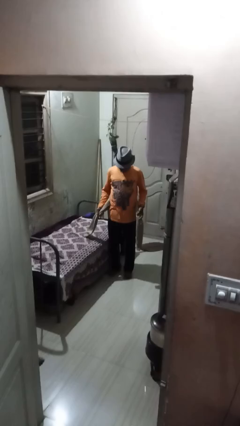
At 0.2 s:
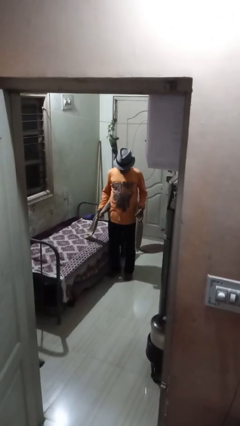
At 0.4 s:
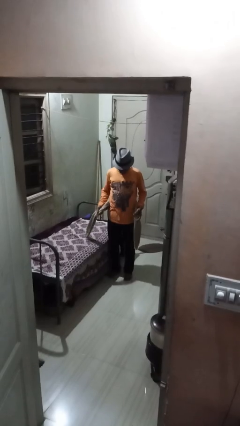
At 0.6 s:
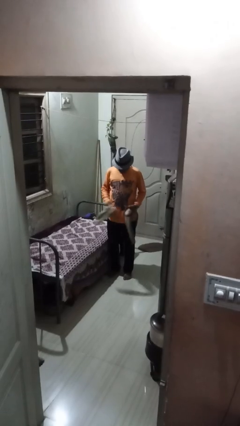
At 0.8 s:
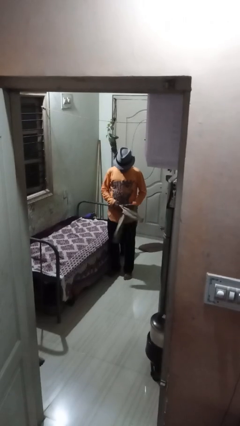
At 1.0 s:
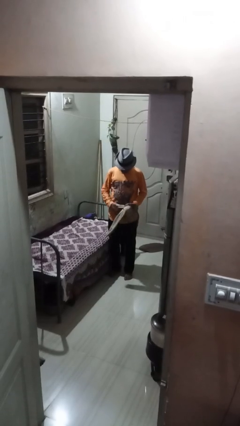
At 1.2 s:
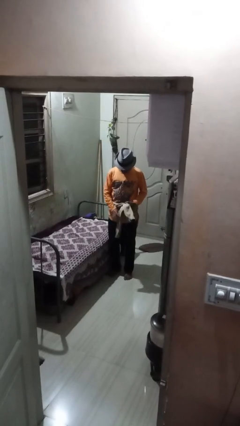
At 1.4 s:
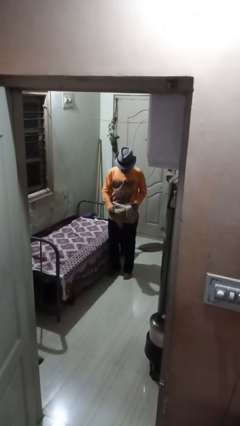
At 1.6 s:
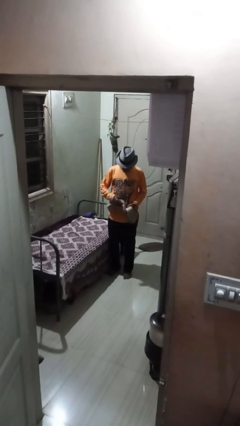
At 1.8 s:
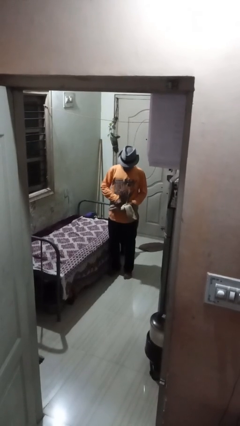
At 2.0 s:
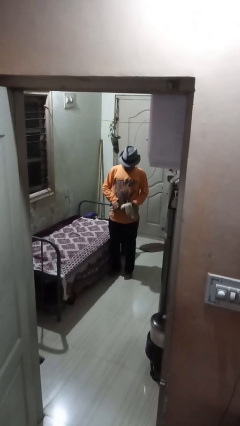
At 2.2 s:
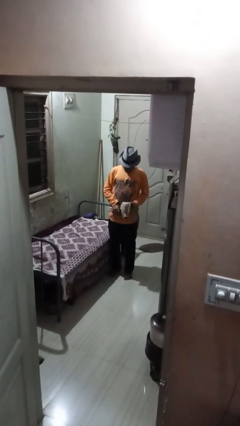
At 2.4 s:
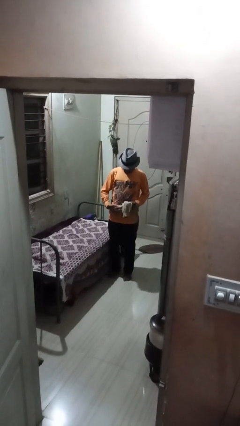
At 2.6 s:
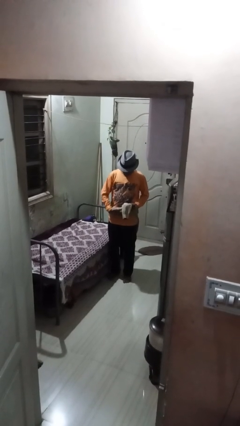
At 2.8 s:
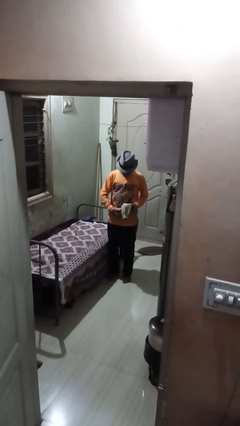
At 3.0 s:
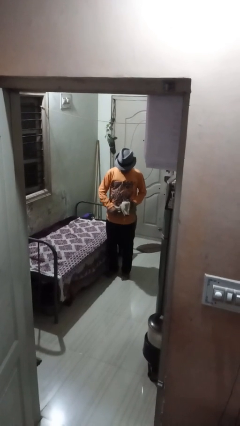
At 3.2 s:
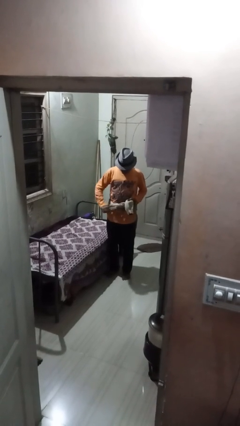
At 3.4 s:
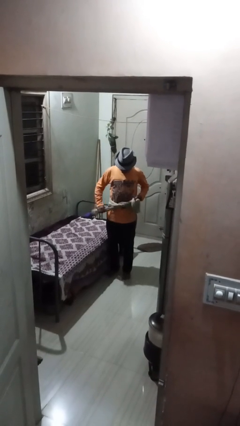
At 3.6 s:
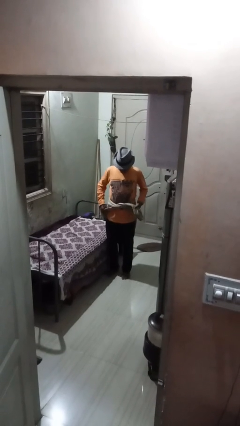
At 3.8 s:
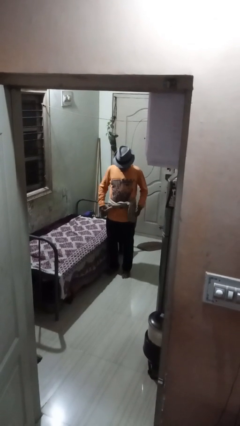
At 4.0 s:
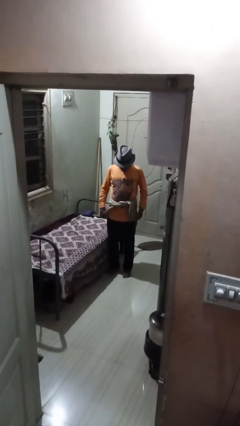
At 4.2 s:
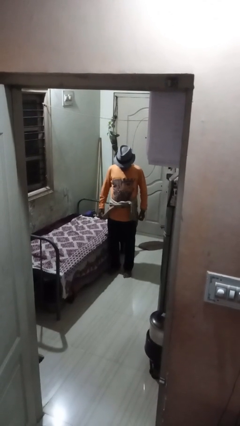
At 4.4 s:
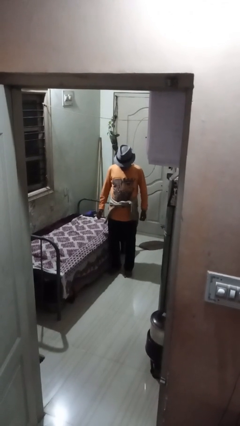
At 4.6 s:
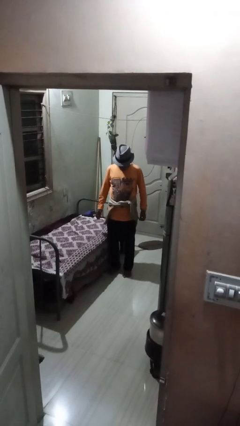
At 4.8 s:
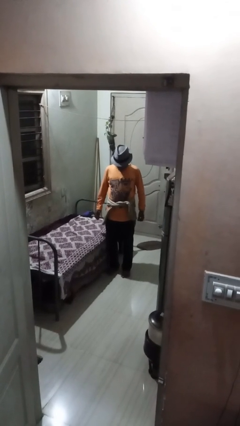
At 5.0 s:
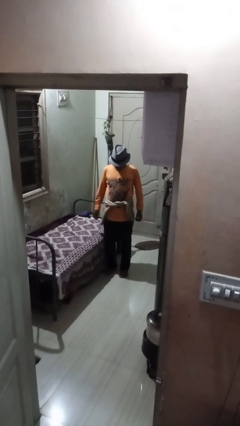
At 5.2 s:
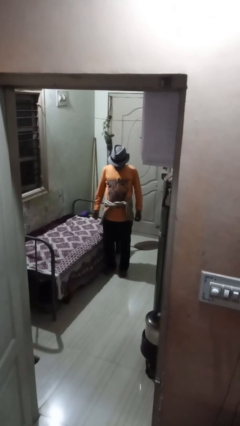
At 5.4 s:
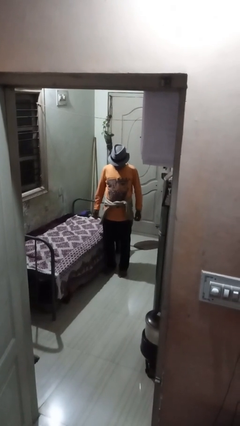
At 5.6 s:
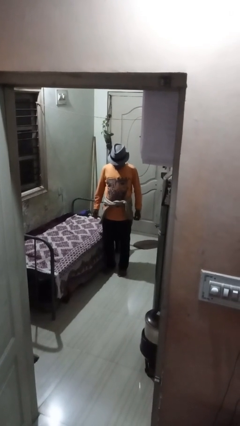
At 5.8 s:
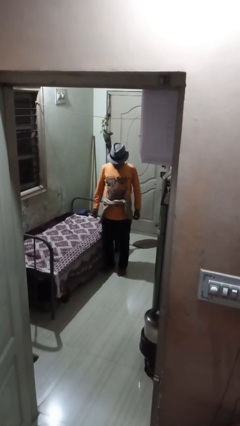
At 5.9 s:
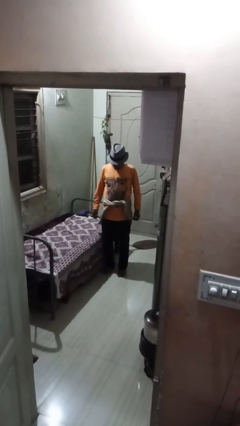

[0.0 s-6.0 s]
person ties jacket around waist

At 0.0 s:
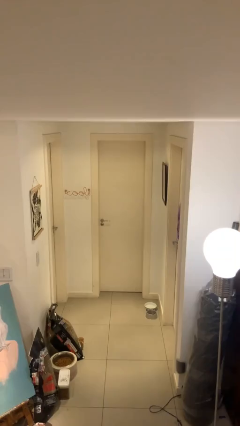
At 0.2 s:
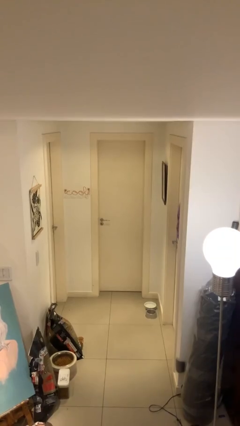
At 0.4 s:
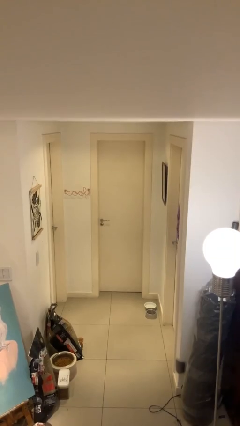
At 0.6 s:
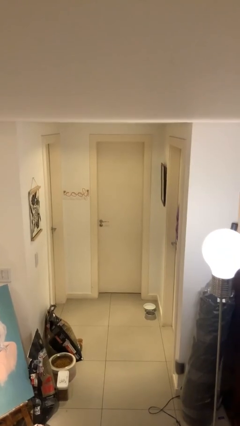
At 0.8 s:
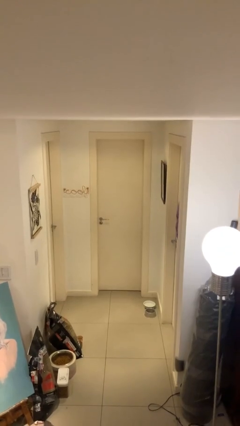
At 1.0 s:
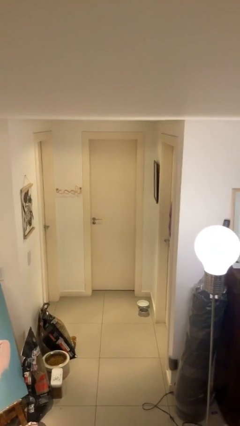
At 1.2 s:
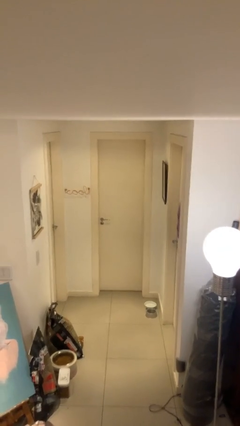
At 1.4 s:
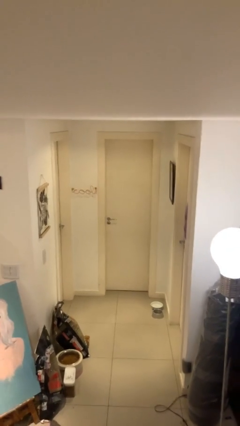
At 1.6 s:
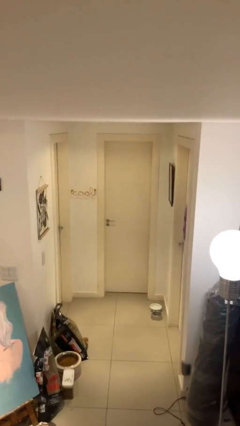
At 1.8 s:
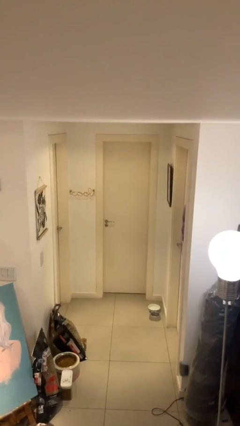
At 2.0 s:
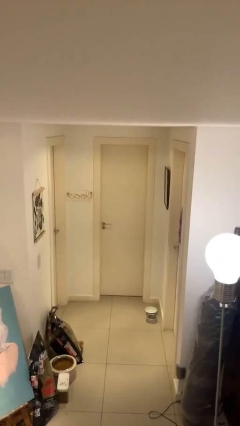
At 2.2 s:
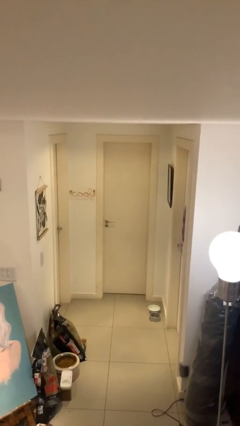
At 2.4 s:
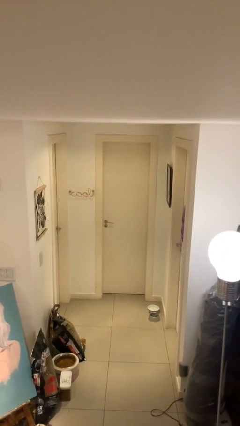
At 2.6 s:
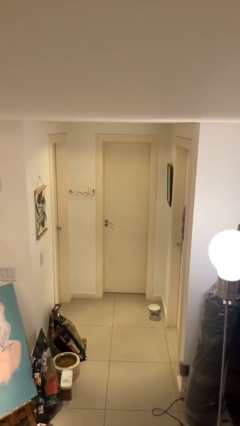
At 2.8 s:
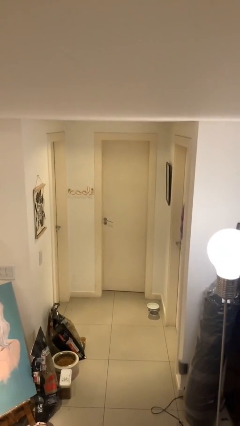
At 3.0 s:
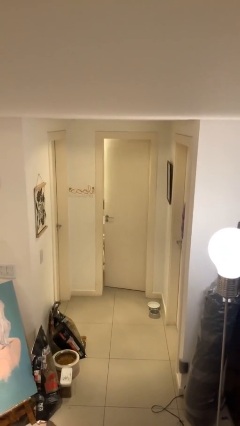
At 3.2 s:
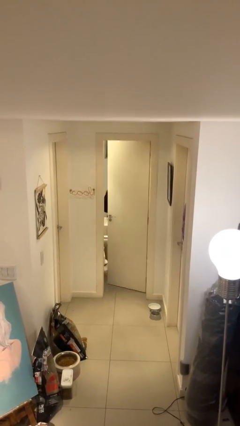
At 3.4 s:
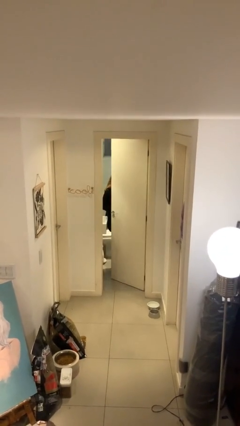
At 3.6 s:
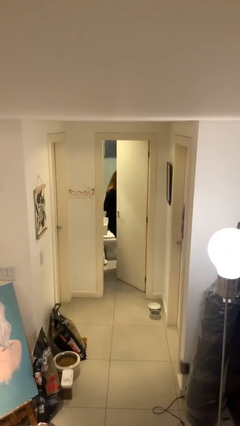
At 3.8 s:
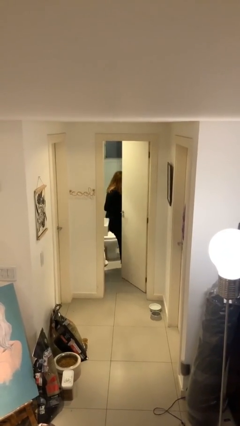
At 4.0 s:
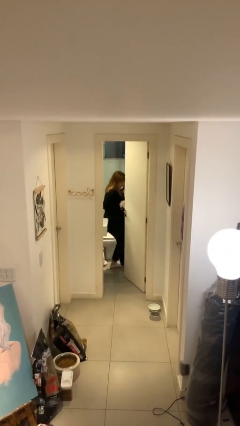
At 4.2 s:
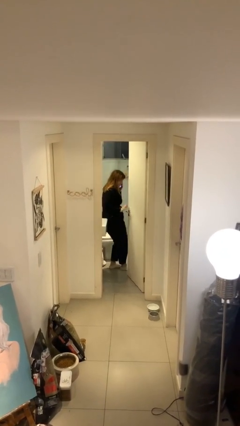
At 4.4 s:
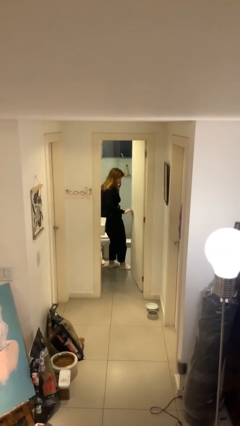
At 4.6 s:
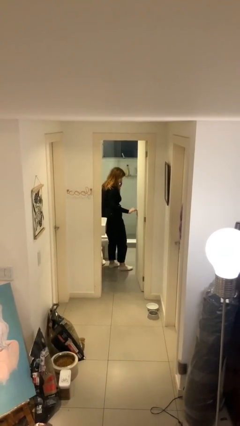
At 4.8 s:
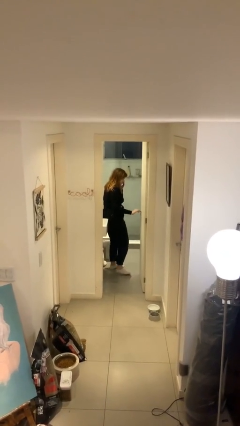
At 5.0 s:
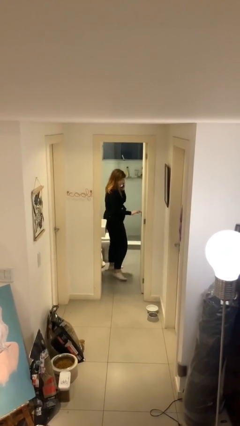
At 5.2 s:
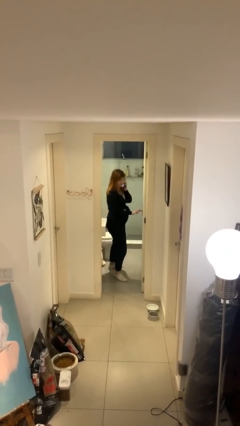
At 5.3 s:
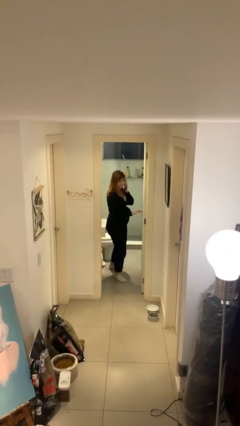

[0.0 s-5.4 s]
person opens facility door

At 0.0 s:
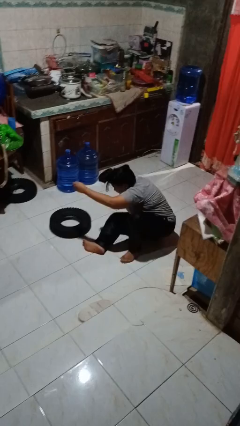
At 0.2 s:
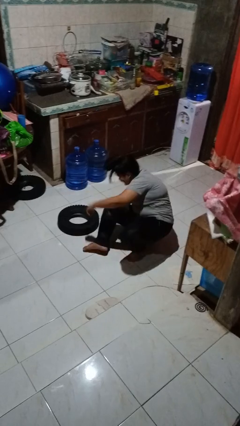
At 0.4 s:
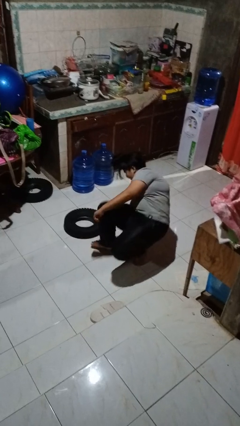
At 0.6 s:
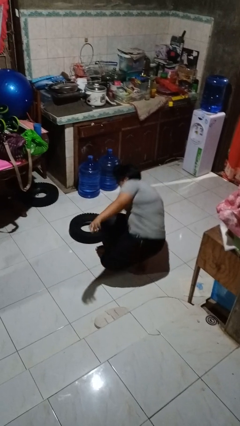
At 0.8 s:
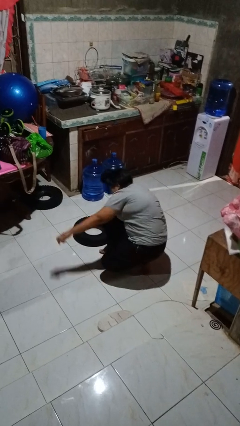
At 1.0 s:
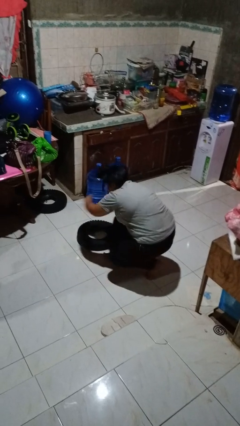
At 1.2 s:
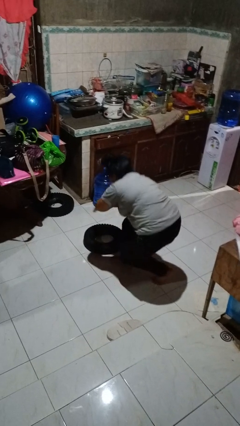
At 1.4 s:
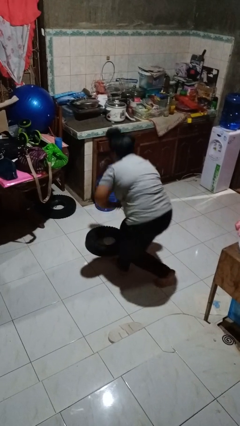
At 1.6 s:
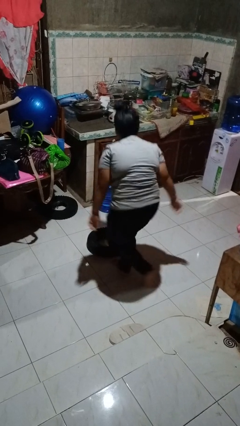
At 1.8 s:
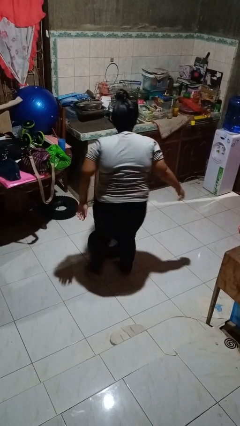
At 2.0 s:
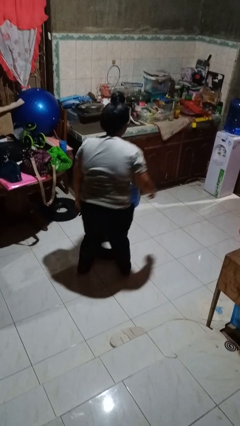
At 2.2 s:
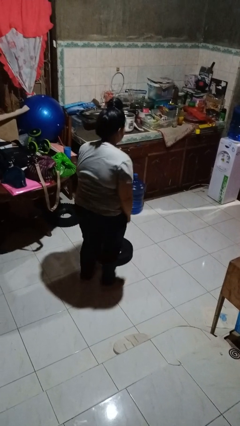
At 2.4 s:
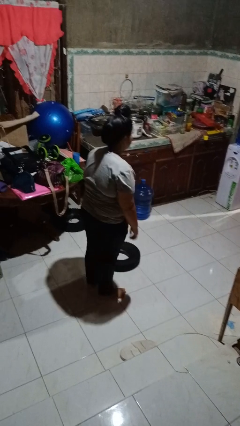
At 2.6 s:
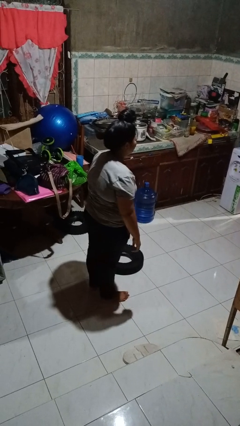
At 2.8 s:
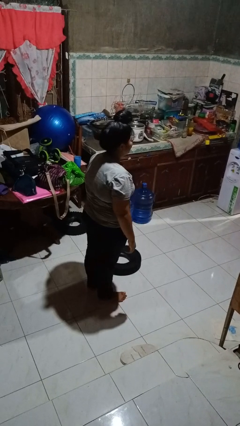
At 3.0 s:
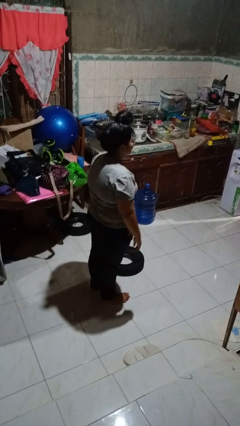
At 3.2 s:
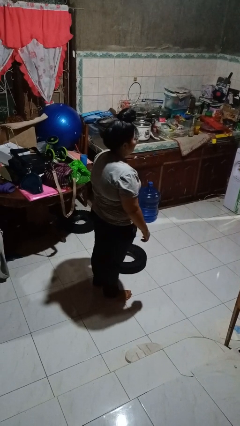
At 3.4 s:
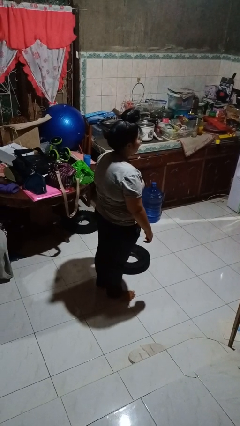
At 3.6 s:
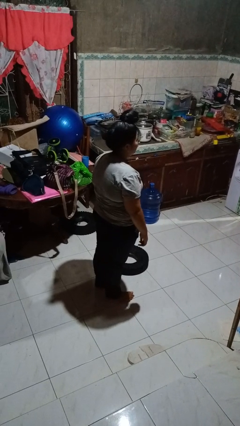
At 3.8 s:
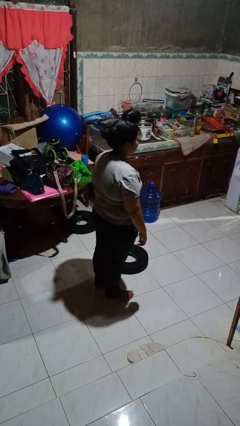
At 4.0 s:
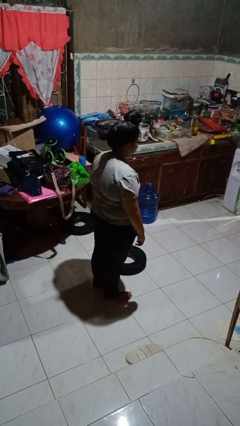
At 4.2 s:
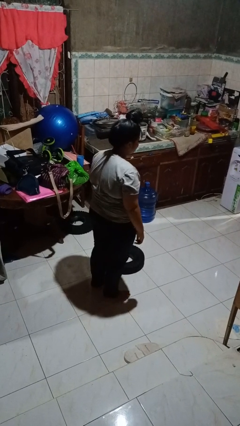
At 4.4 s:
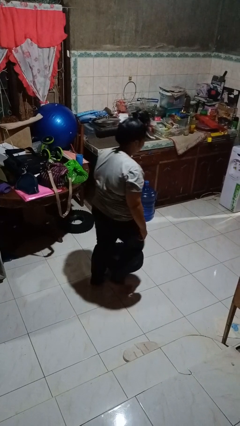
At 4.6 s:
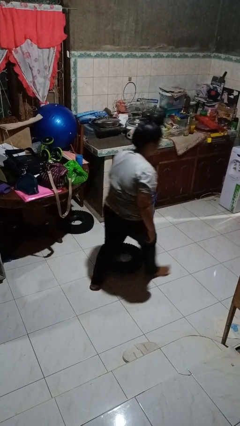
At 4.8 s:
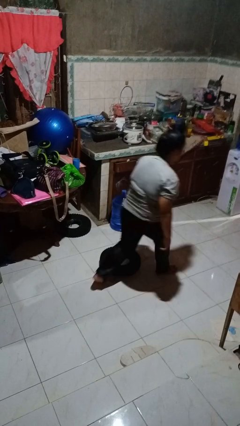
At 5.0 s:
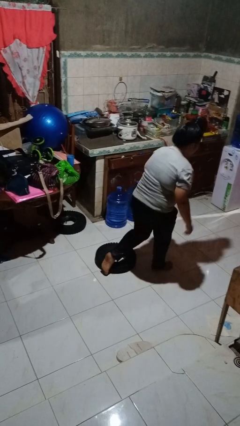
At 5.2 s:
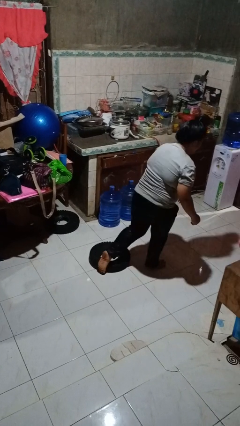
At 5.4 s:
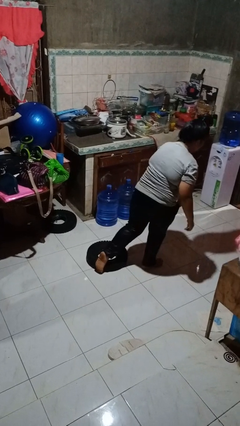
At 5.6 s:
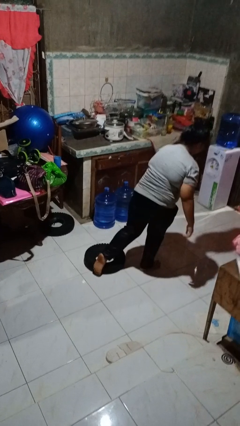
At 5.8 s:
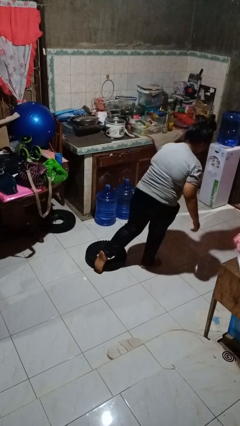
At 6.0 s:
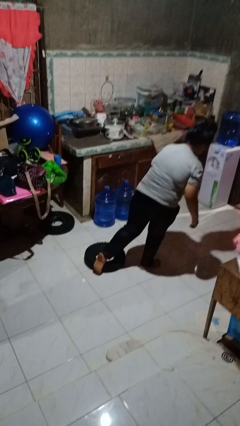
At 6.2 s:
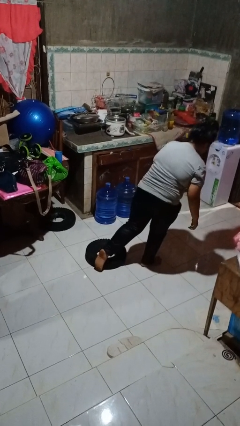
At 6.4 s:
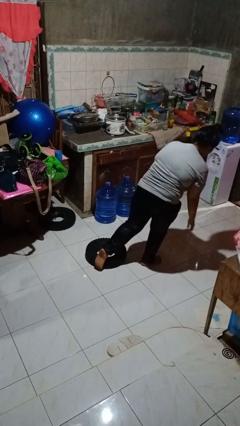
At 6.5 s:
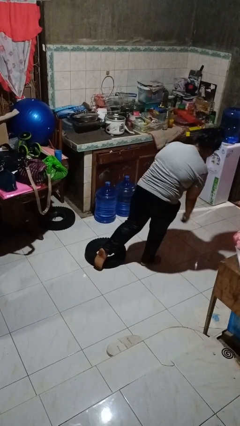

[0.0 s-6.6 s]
person stands up from floor
